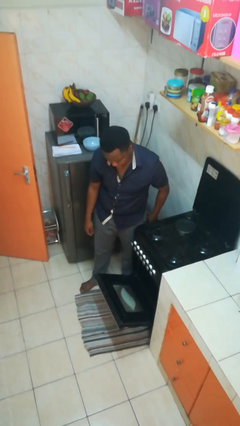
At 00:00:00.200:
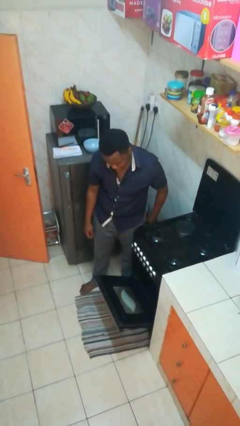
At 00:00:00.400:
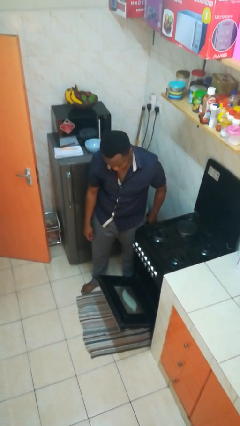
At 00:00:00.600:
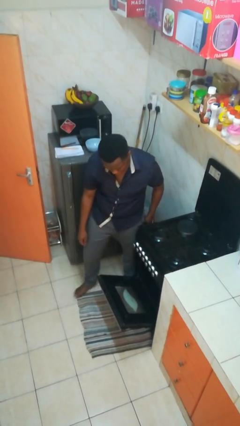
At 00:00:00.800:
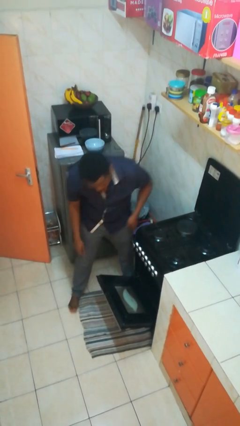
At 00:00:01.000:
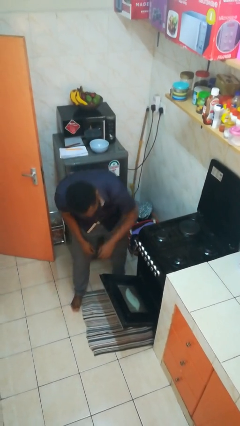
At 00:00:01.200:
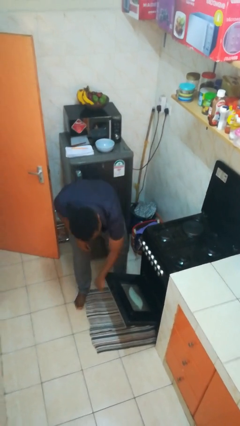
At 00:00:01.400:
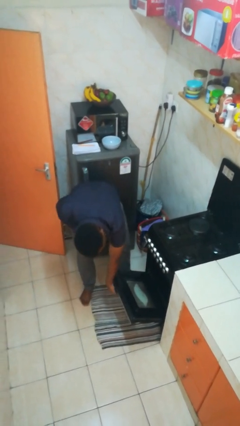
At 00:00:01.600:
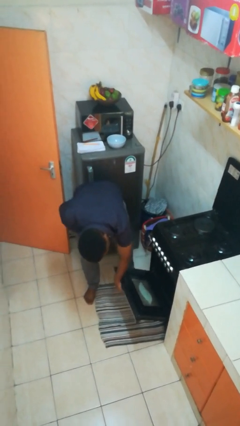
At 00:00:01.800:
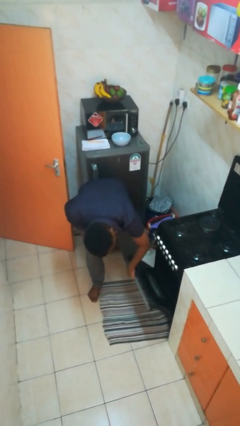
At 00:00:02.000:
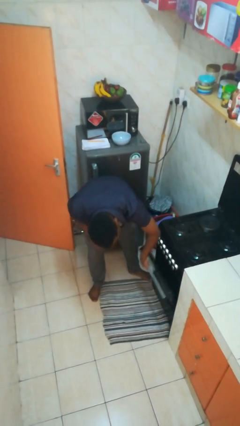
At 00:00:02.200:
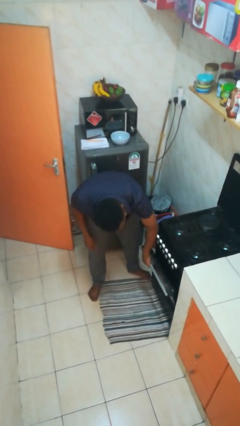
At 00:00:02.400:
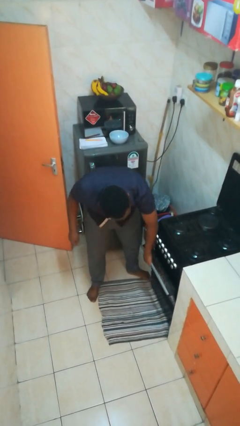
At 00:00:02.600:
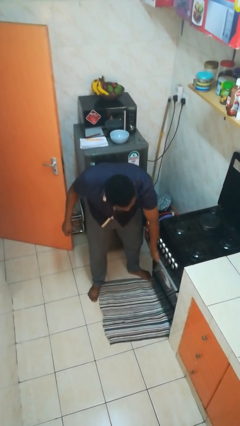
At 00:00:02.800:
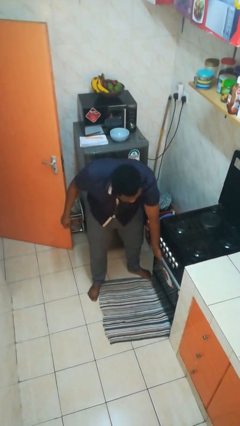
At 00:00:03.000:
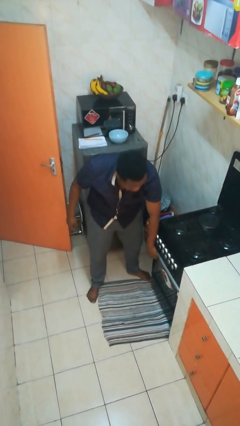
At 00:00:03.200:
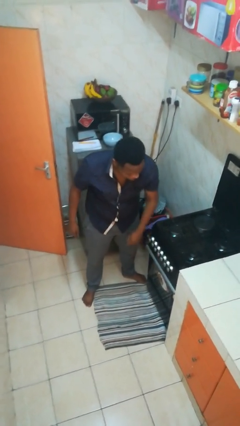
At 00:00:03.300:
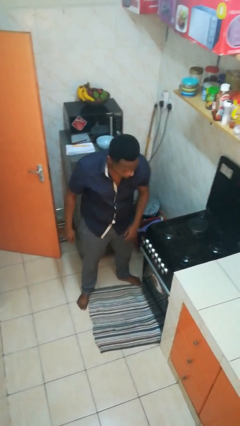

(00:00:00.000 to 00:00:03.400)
person closes oven door

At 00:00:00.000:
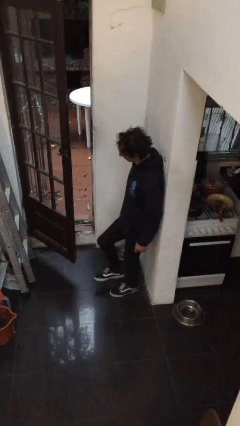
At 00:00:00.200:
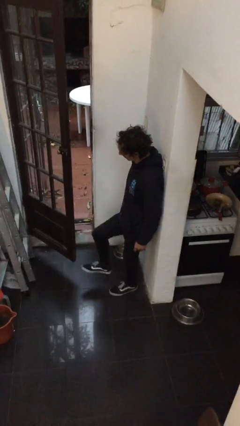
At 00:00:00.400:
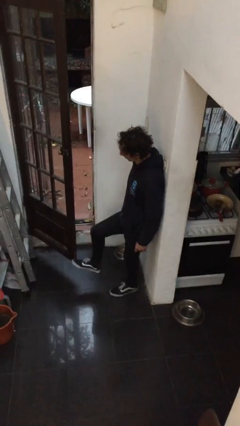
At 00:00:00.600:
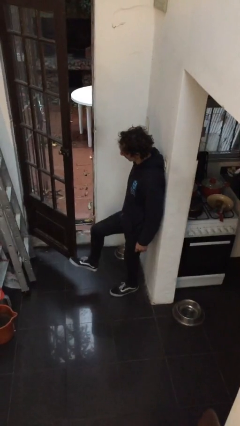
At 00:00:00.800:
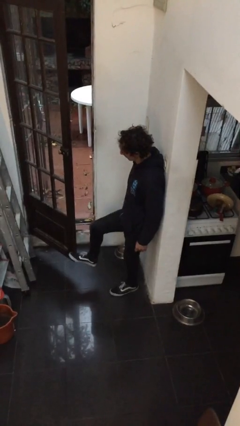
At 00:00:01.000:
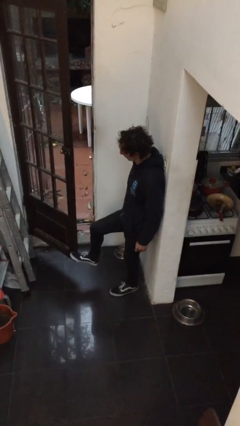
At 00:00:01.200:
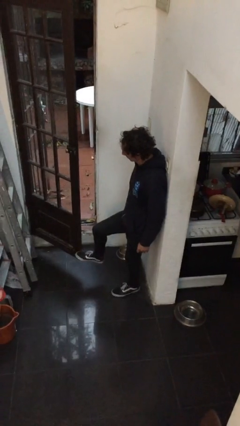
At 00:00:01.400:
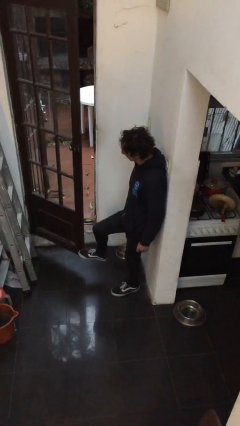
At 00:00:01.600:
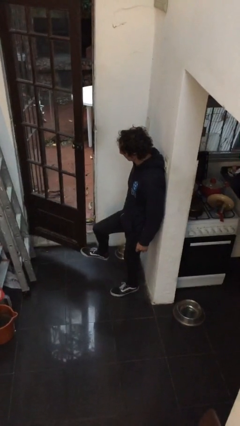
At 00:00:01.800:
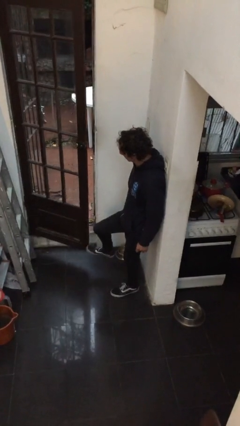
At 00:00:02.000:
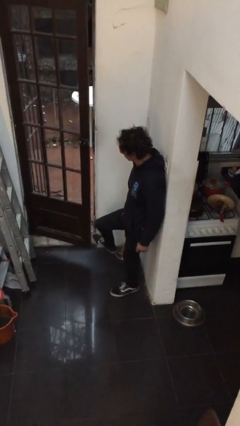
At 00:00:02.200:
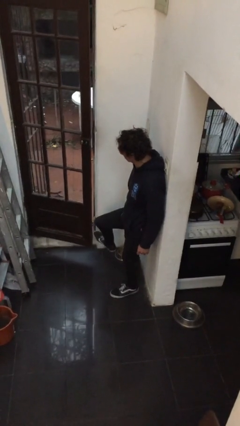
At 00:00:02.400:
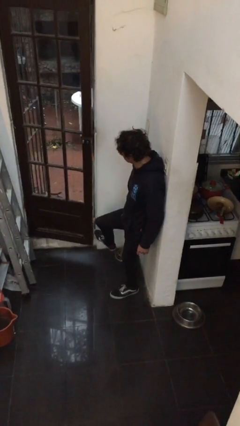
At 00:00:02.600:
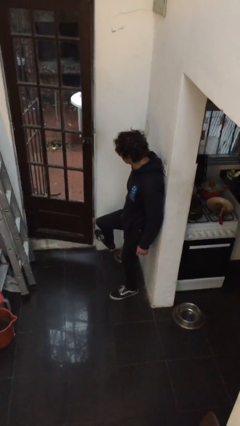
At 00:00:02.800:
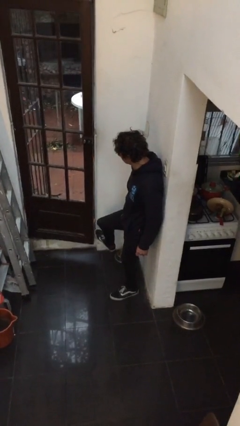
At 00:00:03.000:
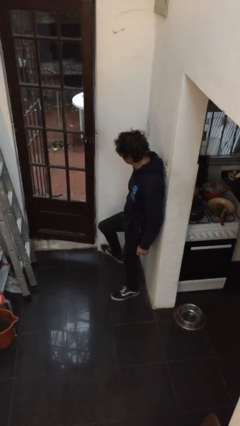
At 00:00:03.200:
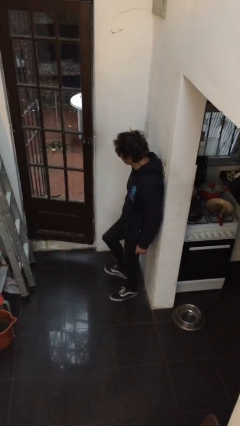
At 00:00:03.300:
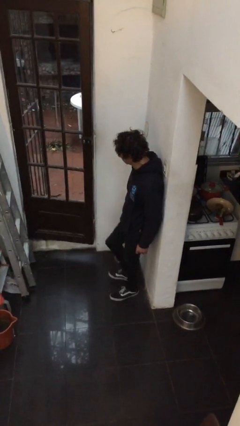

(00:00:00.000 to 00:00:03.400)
person closes door with foot

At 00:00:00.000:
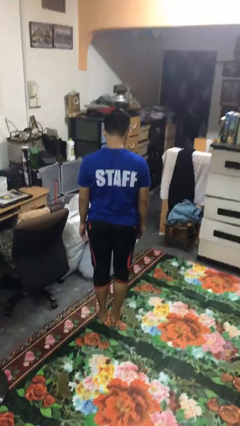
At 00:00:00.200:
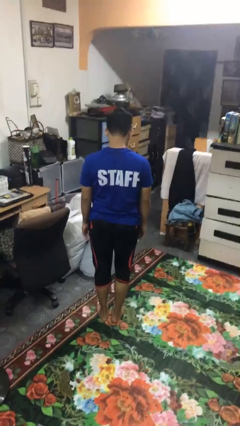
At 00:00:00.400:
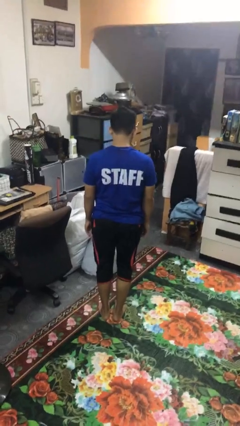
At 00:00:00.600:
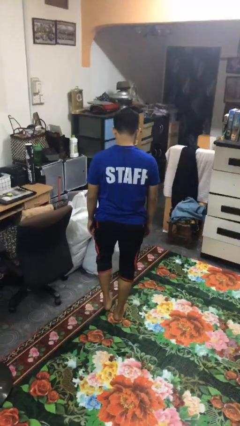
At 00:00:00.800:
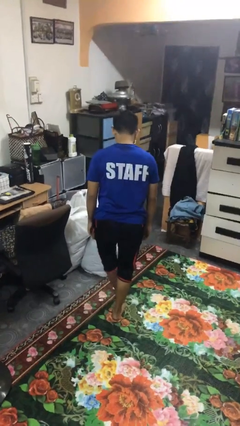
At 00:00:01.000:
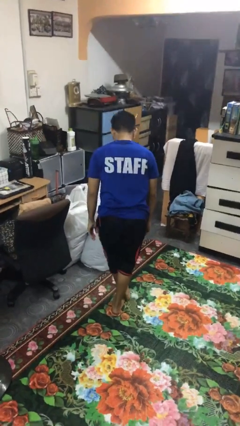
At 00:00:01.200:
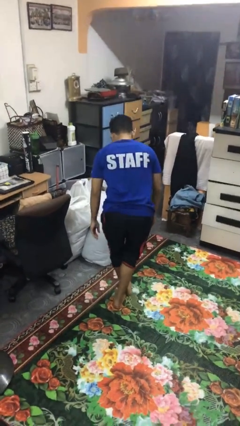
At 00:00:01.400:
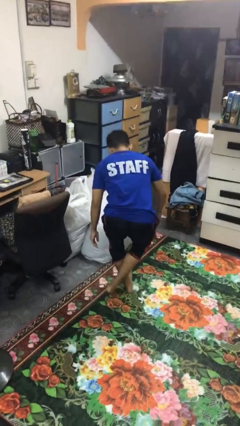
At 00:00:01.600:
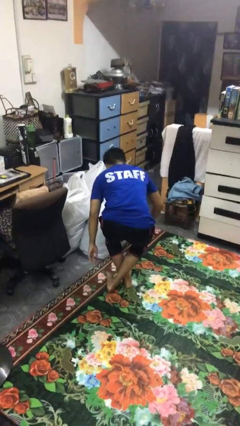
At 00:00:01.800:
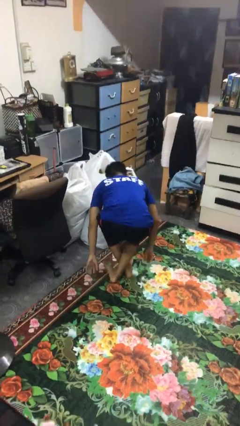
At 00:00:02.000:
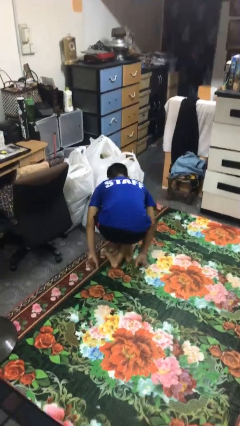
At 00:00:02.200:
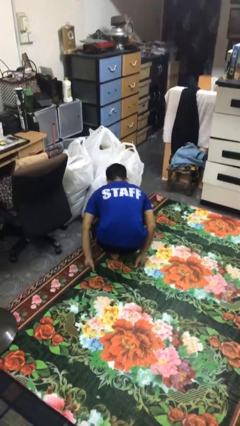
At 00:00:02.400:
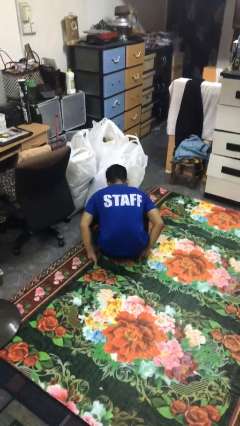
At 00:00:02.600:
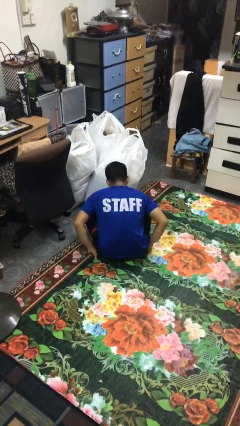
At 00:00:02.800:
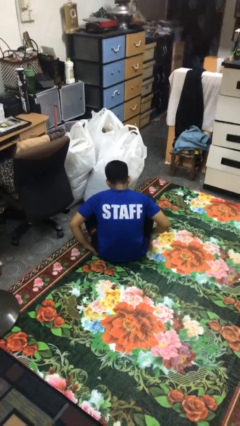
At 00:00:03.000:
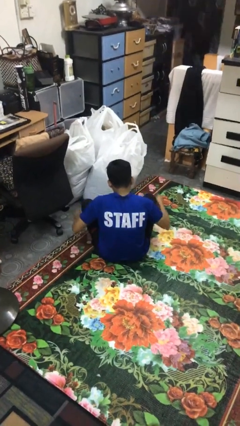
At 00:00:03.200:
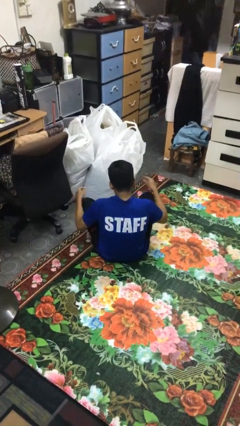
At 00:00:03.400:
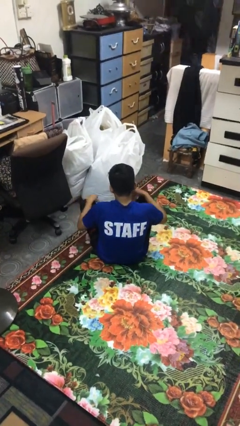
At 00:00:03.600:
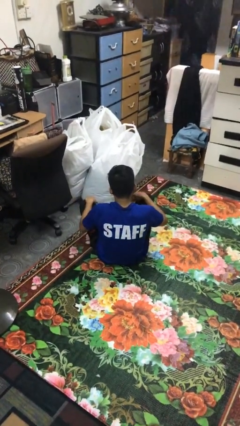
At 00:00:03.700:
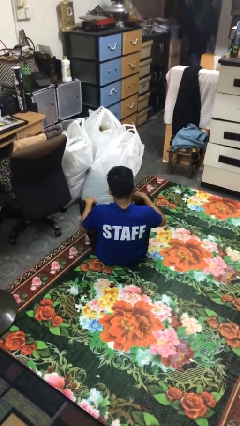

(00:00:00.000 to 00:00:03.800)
person sits crisscross

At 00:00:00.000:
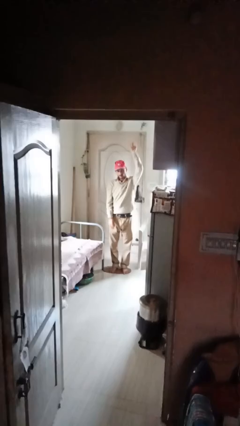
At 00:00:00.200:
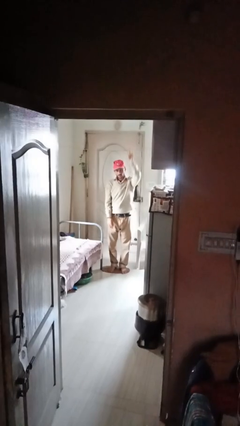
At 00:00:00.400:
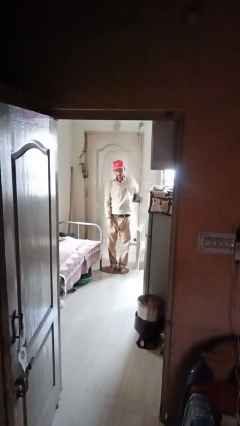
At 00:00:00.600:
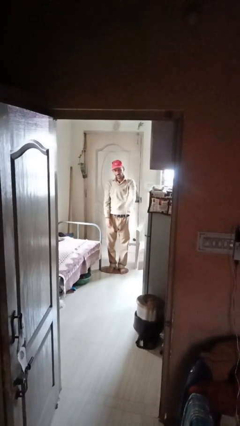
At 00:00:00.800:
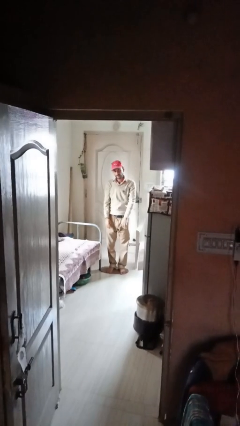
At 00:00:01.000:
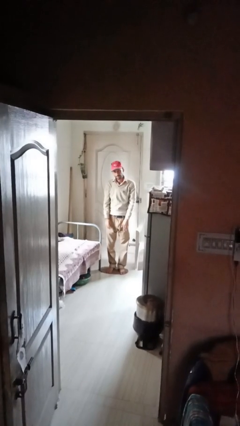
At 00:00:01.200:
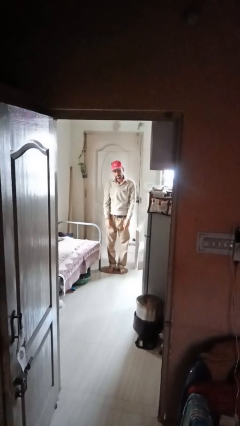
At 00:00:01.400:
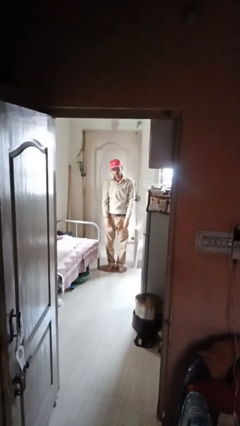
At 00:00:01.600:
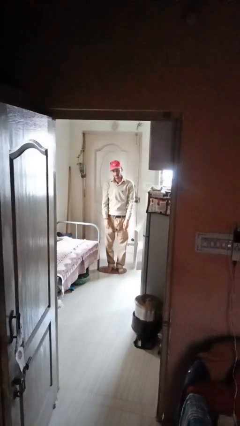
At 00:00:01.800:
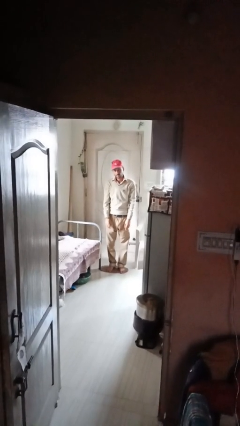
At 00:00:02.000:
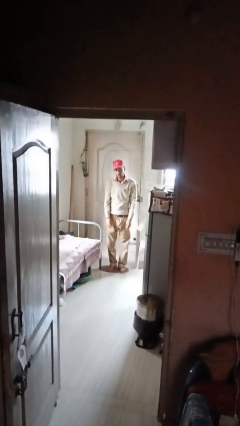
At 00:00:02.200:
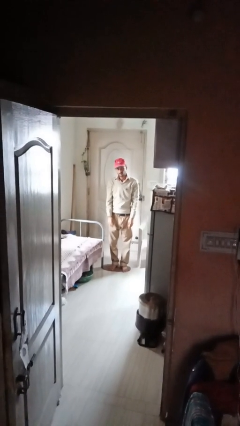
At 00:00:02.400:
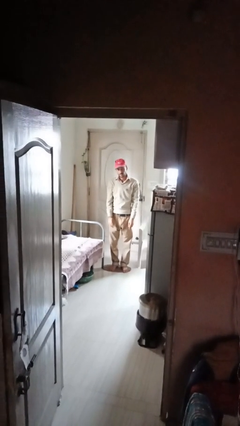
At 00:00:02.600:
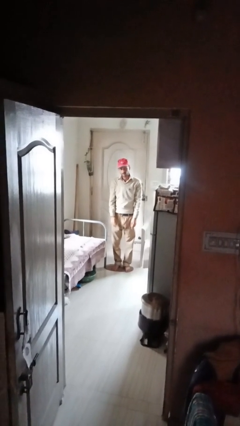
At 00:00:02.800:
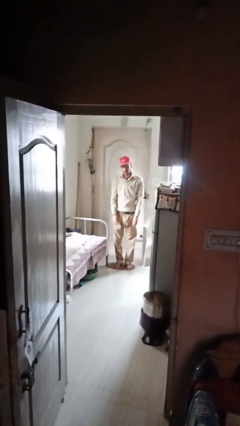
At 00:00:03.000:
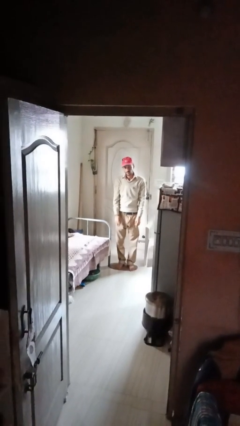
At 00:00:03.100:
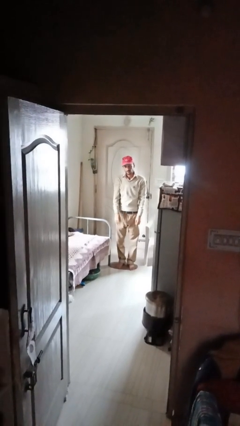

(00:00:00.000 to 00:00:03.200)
person gestures swipe down

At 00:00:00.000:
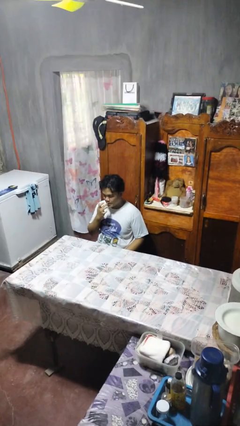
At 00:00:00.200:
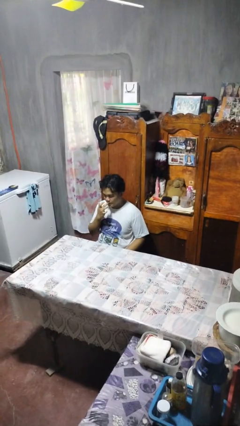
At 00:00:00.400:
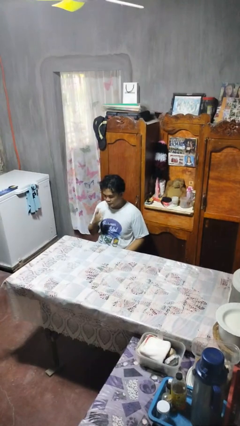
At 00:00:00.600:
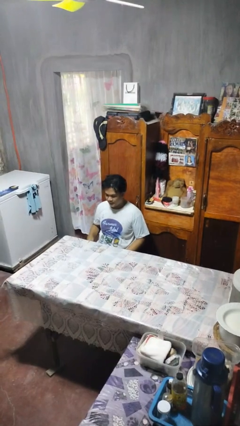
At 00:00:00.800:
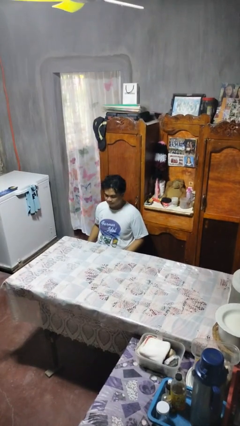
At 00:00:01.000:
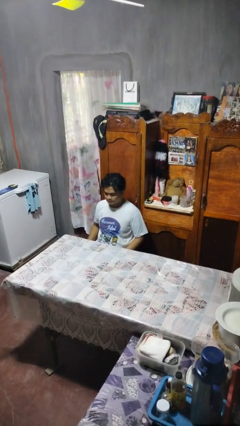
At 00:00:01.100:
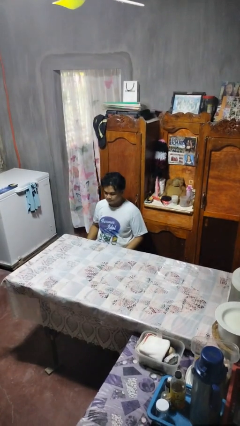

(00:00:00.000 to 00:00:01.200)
person licks fingers

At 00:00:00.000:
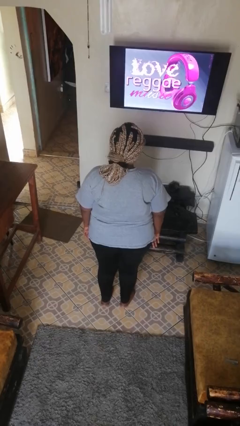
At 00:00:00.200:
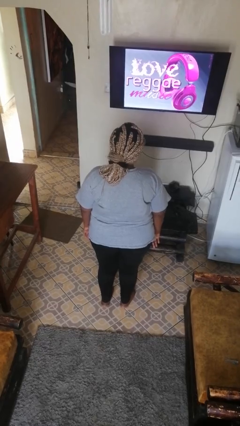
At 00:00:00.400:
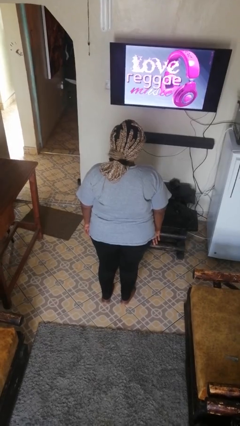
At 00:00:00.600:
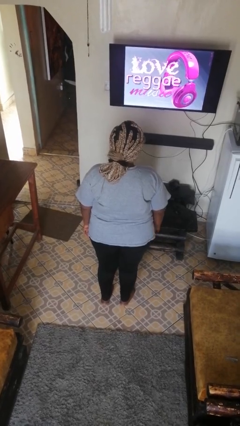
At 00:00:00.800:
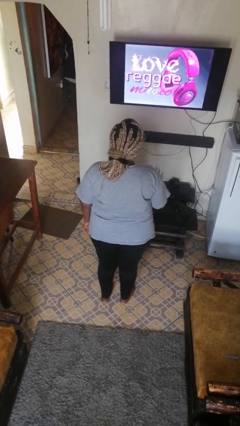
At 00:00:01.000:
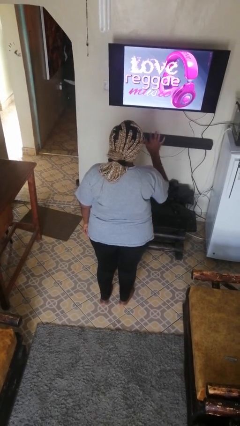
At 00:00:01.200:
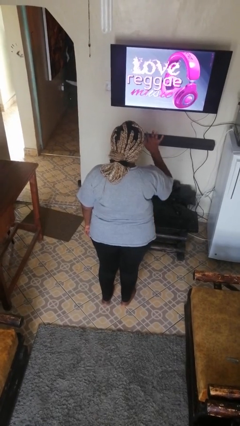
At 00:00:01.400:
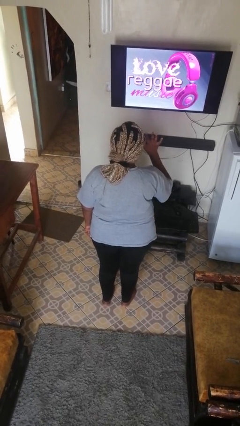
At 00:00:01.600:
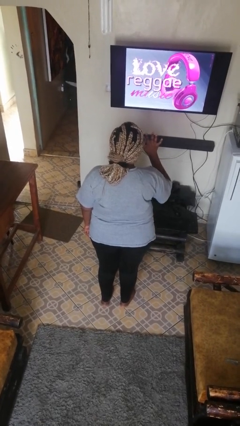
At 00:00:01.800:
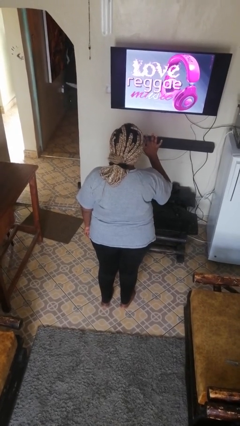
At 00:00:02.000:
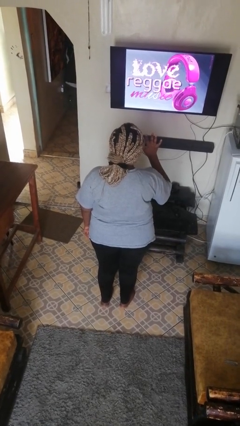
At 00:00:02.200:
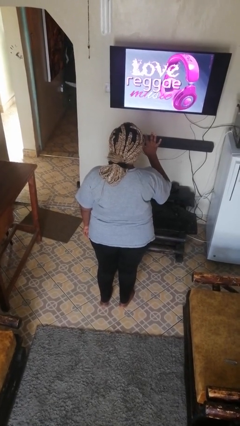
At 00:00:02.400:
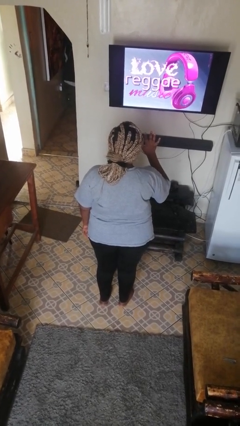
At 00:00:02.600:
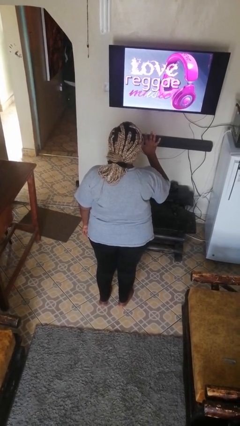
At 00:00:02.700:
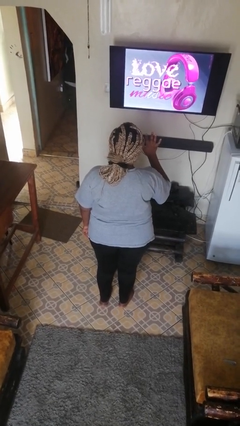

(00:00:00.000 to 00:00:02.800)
person gestures stop
